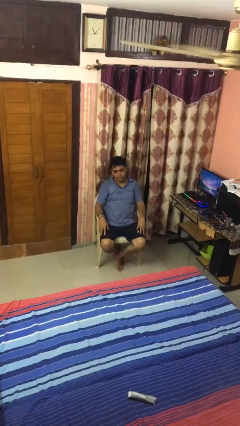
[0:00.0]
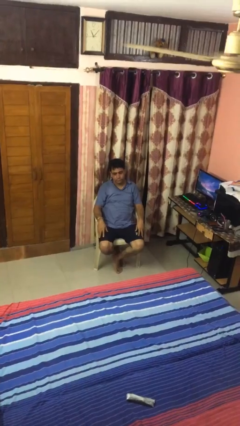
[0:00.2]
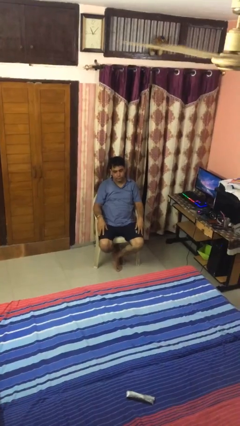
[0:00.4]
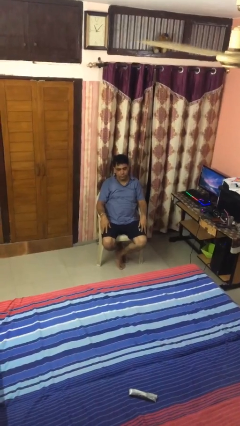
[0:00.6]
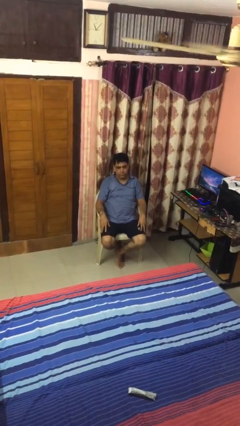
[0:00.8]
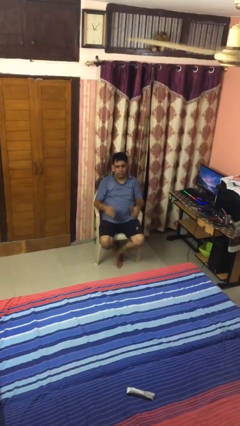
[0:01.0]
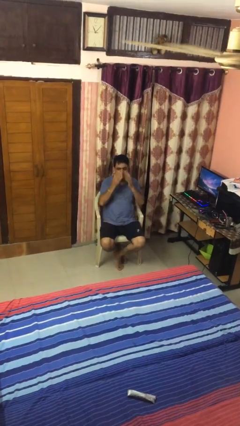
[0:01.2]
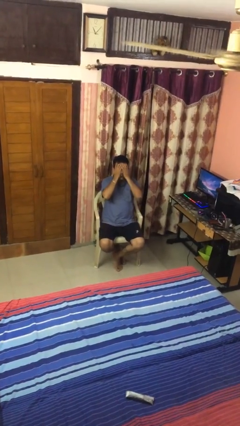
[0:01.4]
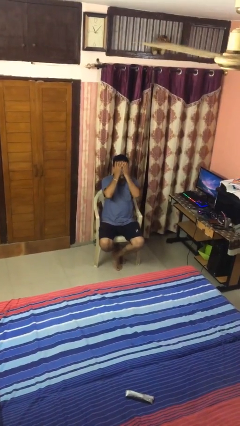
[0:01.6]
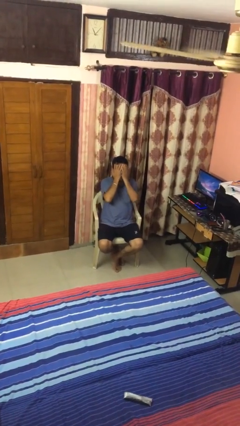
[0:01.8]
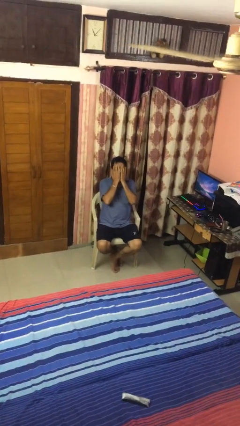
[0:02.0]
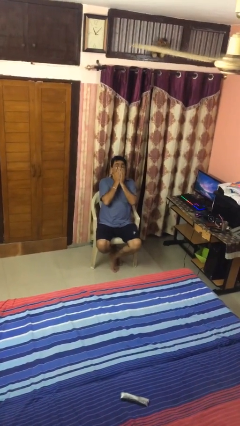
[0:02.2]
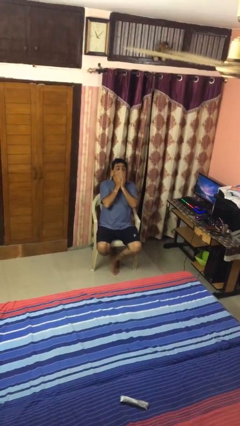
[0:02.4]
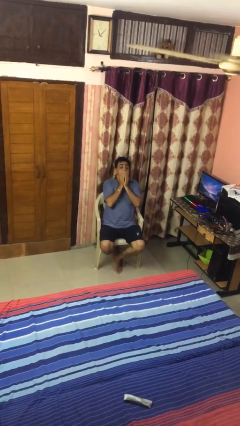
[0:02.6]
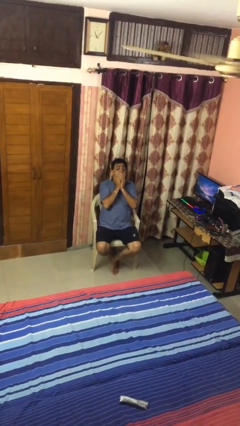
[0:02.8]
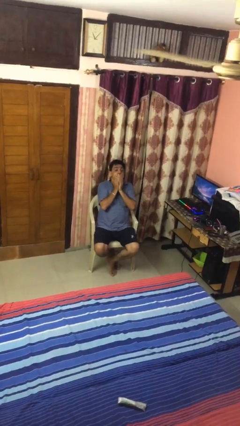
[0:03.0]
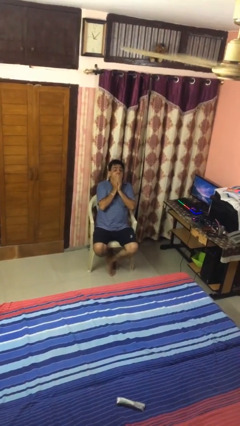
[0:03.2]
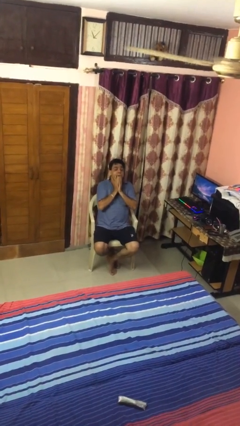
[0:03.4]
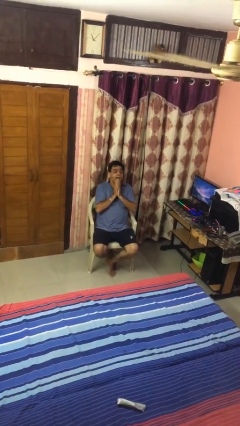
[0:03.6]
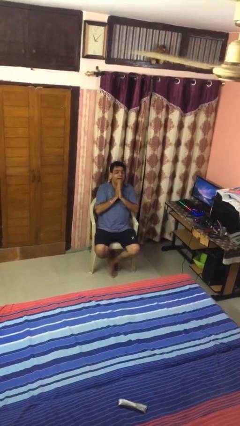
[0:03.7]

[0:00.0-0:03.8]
person covers face with hands

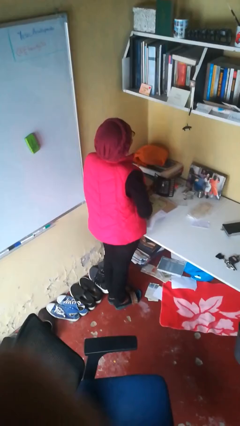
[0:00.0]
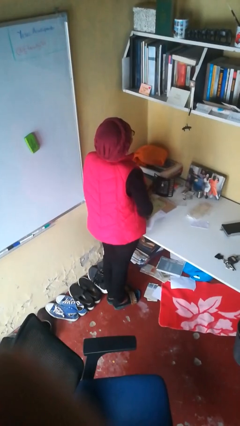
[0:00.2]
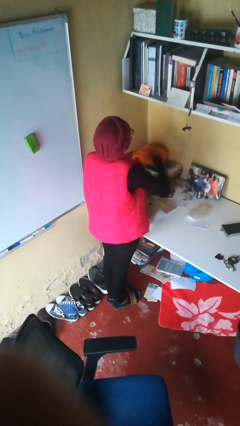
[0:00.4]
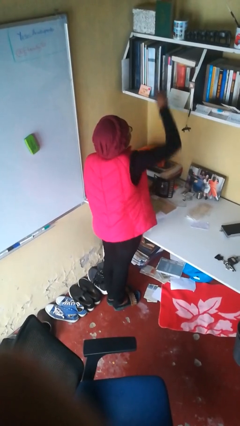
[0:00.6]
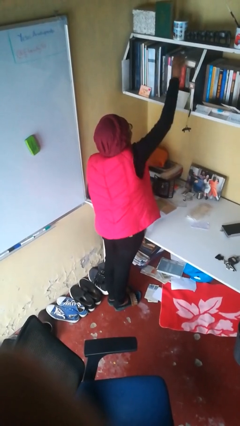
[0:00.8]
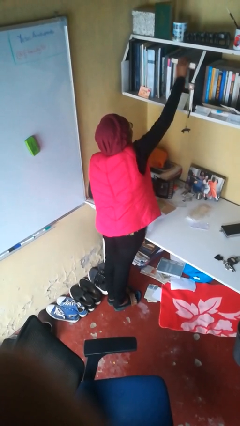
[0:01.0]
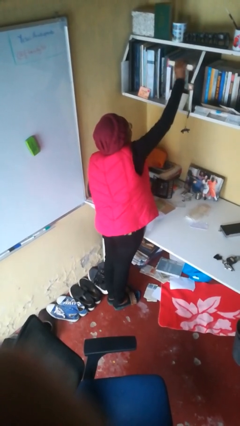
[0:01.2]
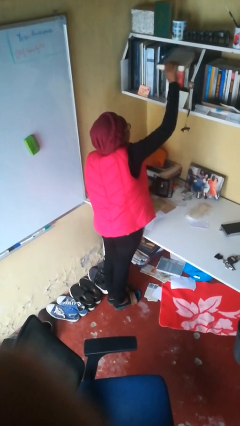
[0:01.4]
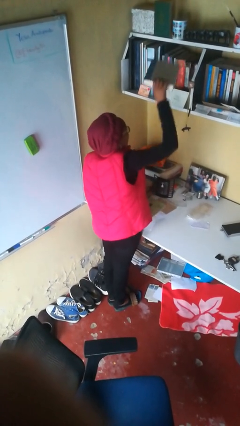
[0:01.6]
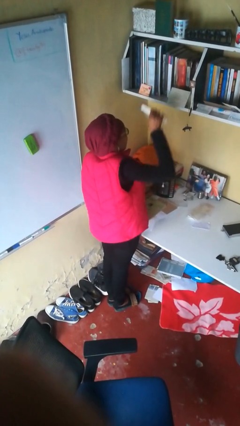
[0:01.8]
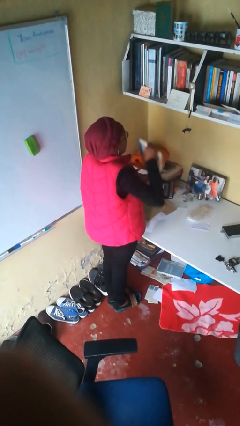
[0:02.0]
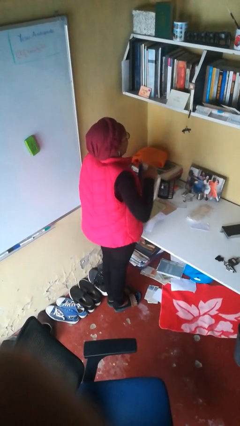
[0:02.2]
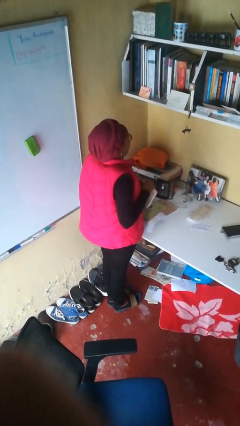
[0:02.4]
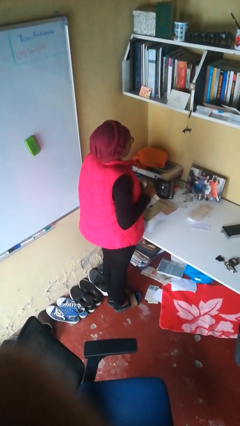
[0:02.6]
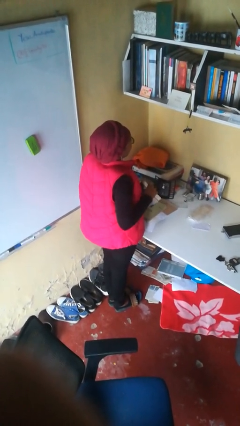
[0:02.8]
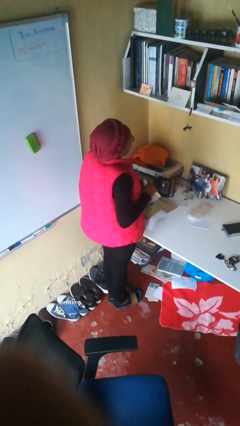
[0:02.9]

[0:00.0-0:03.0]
person picks up object from shelf

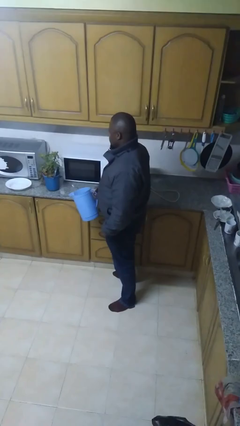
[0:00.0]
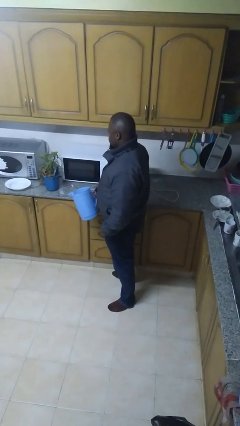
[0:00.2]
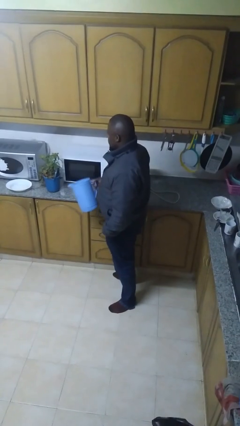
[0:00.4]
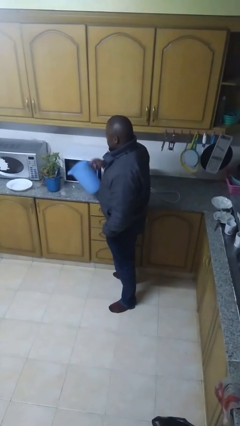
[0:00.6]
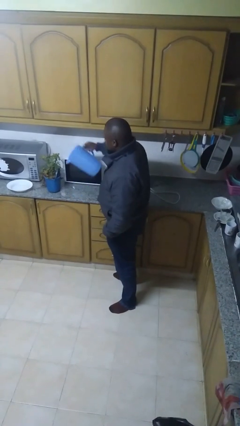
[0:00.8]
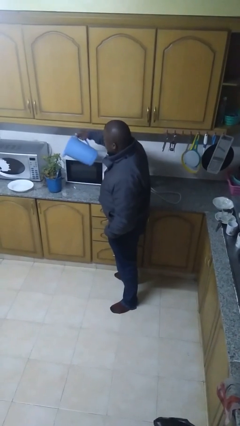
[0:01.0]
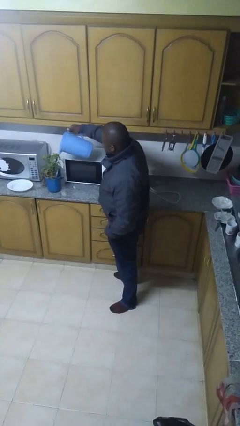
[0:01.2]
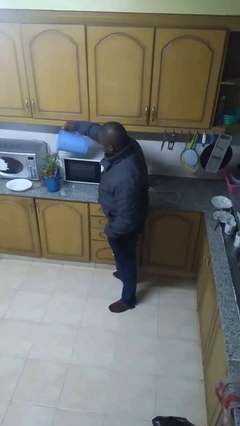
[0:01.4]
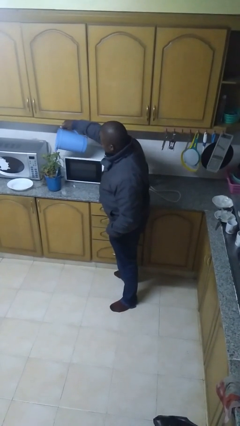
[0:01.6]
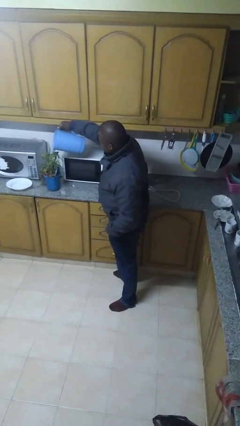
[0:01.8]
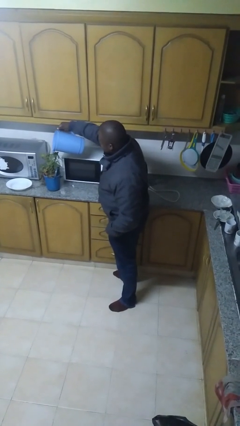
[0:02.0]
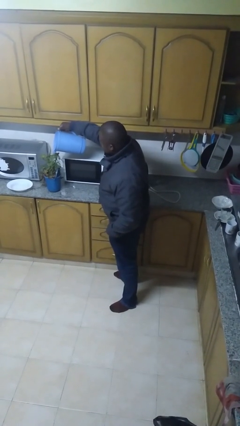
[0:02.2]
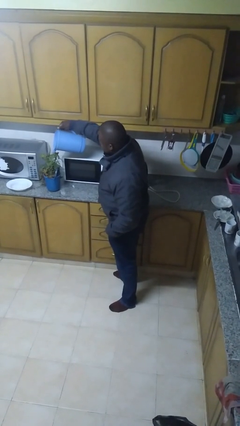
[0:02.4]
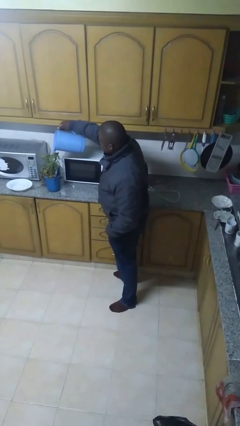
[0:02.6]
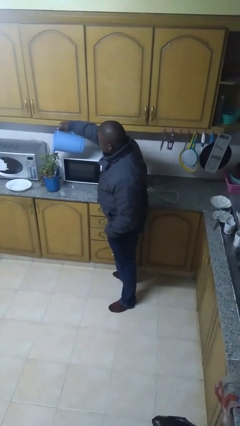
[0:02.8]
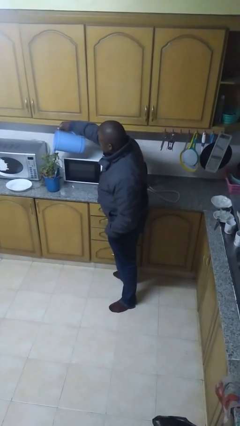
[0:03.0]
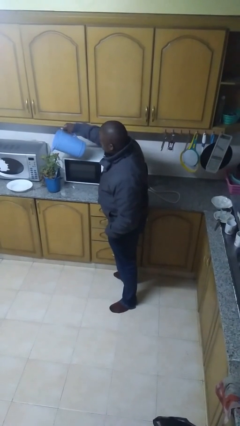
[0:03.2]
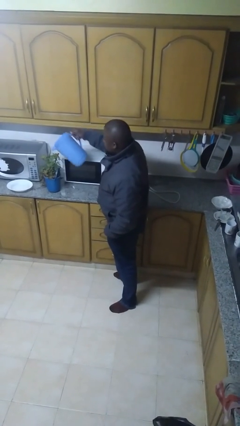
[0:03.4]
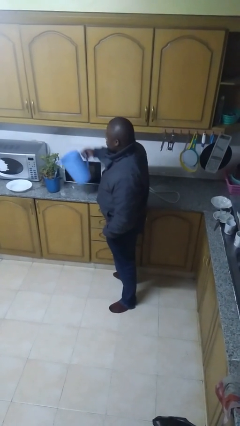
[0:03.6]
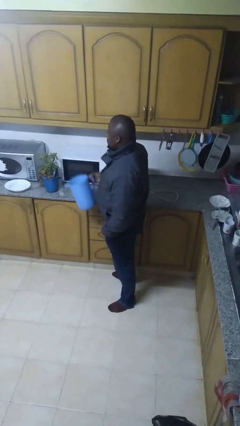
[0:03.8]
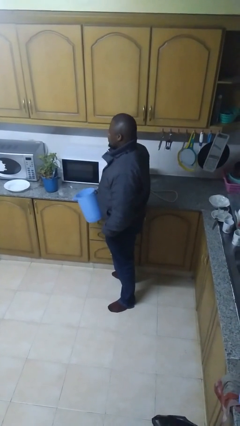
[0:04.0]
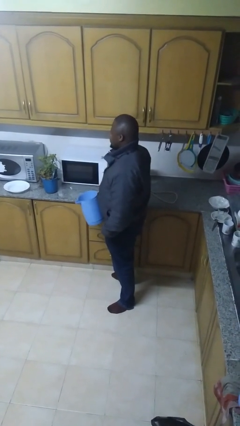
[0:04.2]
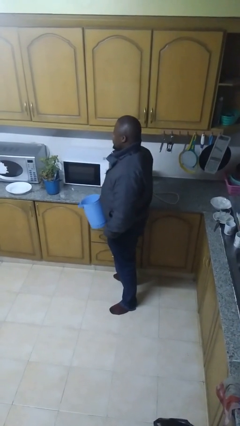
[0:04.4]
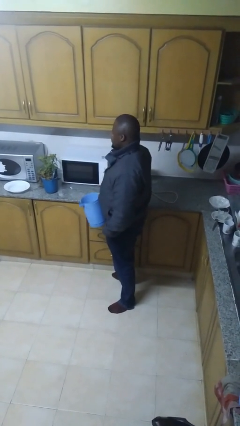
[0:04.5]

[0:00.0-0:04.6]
person waters houseplant

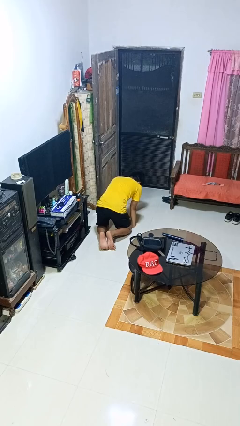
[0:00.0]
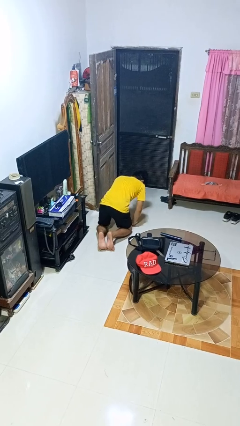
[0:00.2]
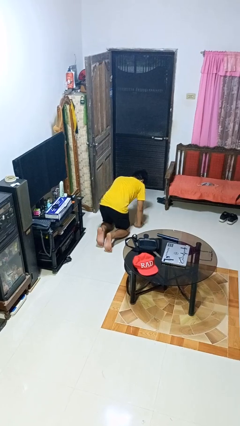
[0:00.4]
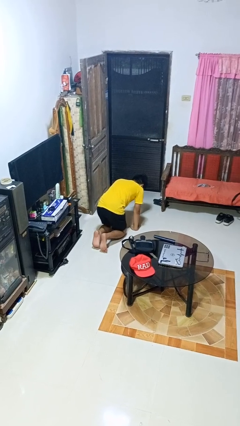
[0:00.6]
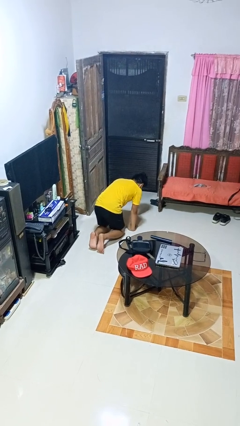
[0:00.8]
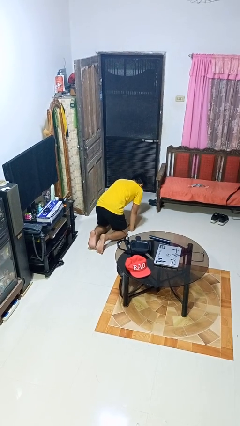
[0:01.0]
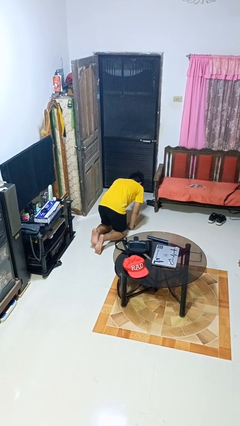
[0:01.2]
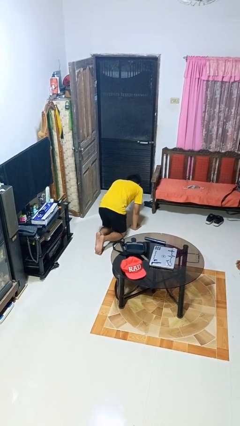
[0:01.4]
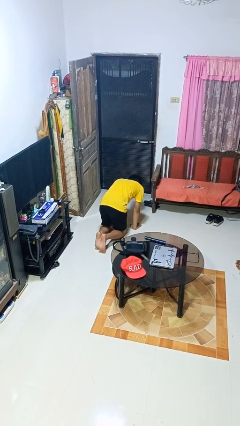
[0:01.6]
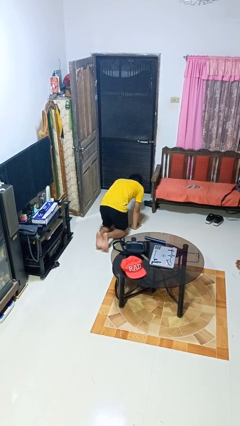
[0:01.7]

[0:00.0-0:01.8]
person crawls

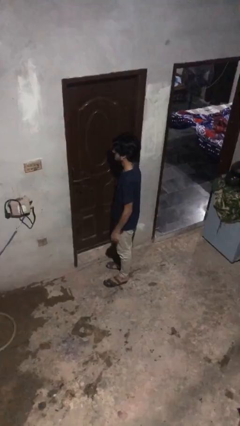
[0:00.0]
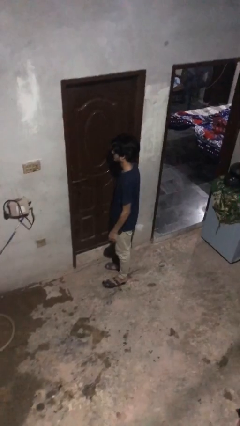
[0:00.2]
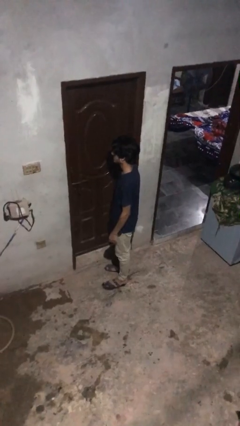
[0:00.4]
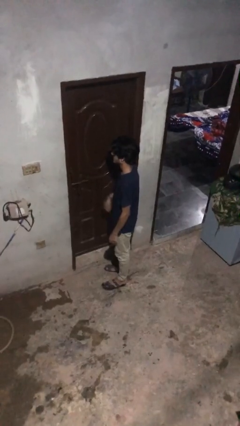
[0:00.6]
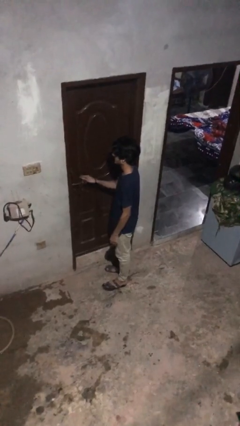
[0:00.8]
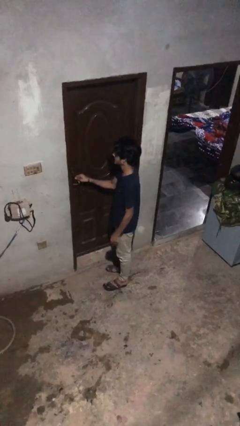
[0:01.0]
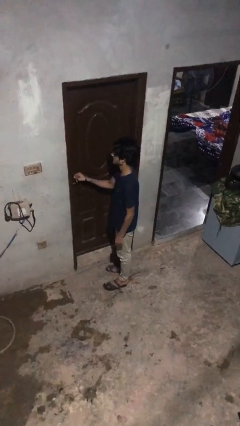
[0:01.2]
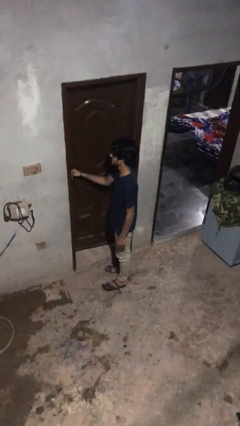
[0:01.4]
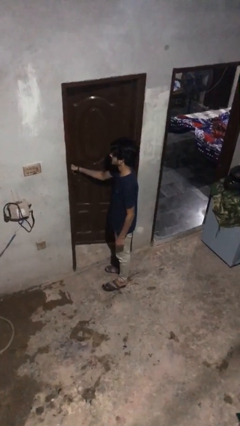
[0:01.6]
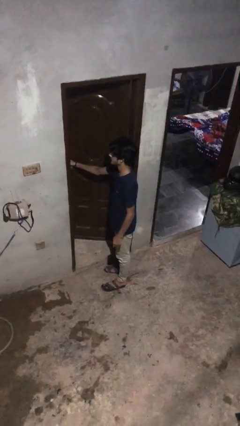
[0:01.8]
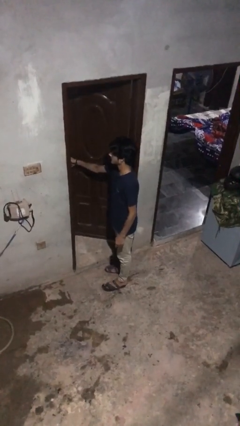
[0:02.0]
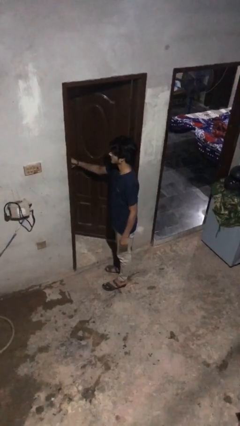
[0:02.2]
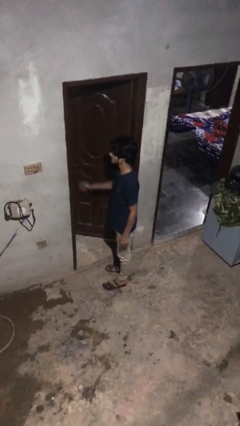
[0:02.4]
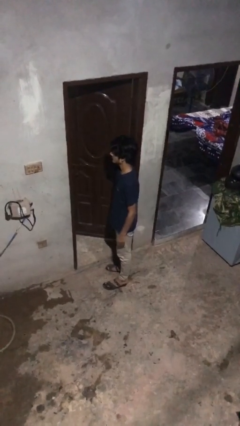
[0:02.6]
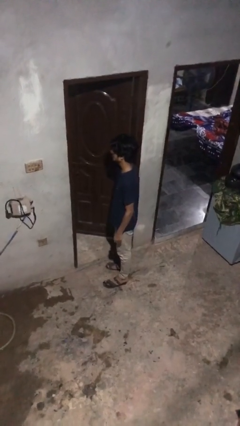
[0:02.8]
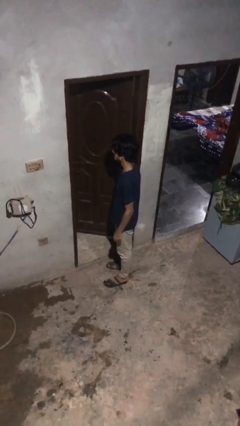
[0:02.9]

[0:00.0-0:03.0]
person opens facility door

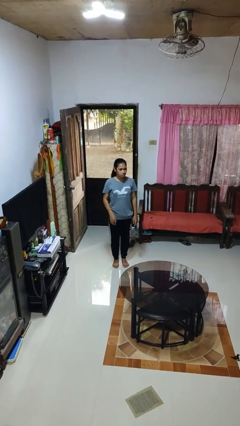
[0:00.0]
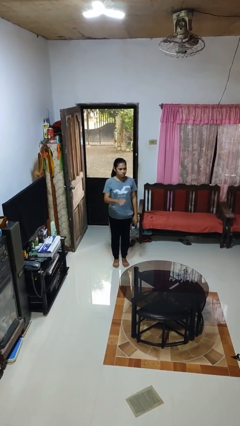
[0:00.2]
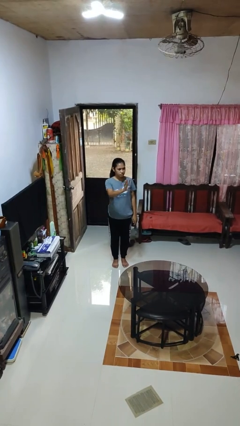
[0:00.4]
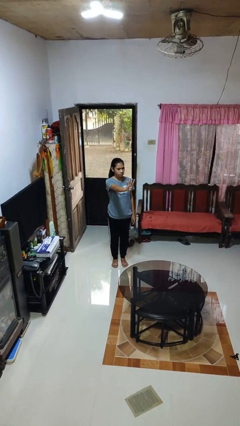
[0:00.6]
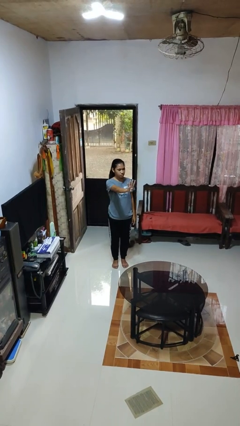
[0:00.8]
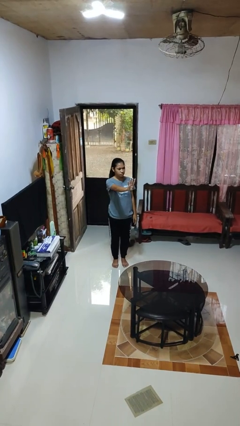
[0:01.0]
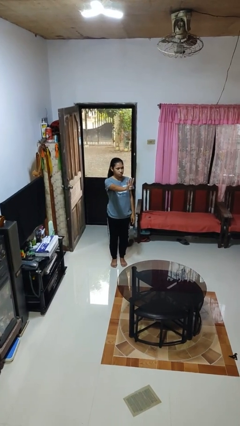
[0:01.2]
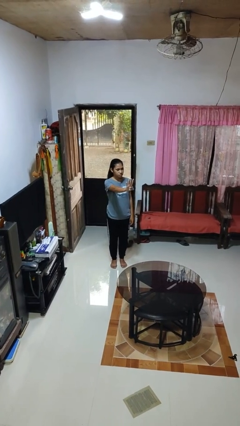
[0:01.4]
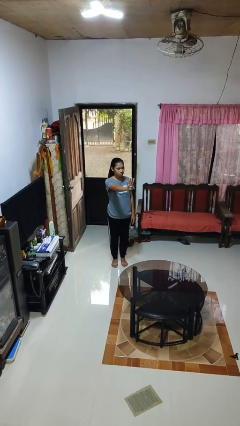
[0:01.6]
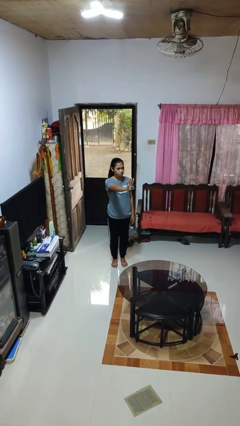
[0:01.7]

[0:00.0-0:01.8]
person gestures number four
